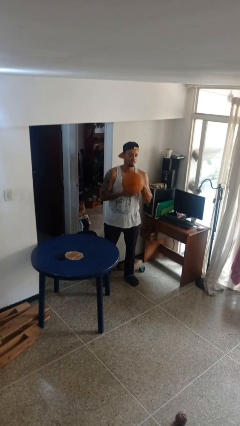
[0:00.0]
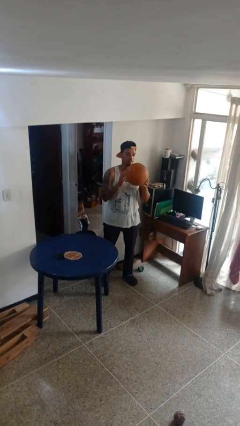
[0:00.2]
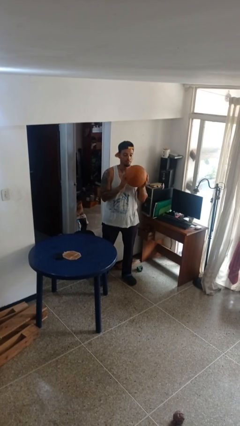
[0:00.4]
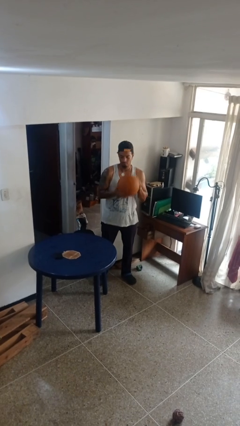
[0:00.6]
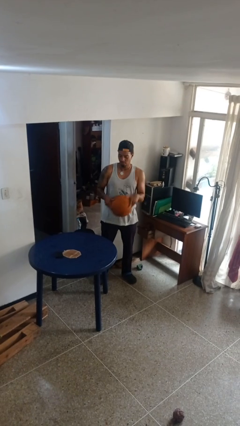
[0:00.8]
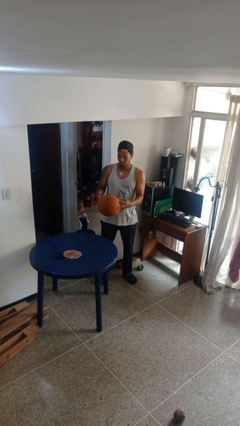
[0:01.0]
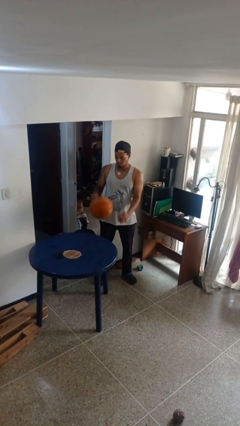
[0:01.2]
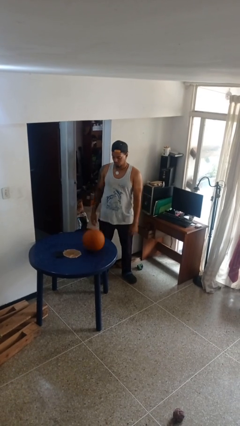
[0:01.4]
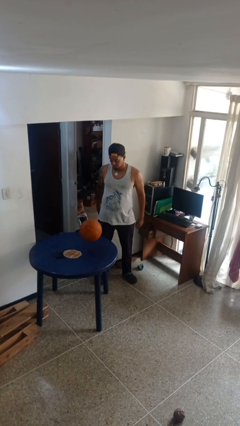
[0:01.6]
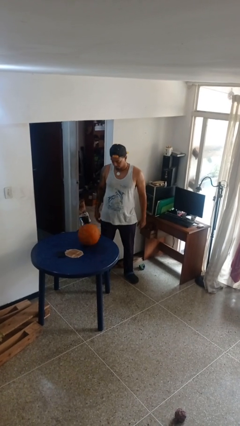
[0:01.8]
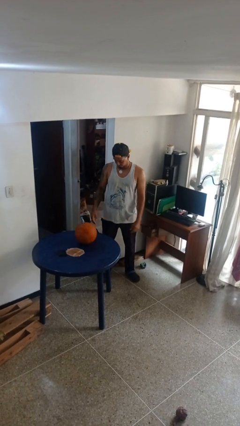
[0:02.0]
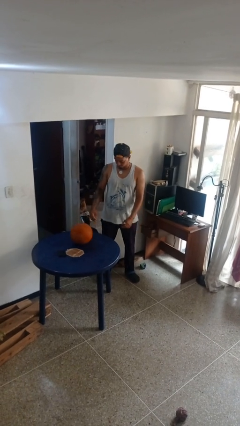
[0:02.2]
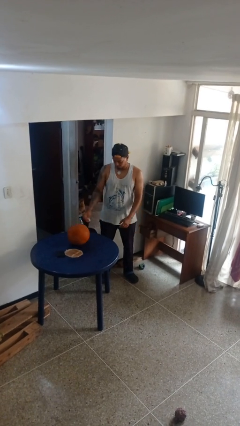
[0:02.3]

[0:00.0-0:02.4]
person throws object on table

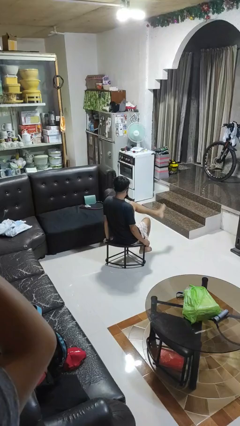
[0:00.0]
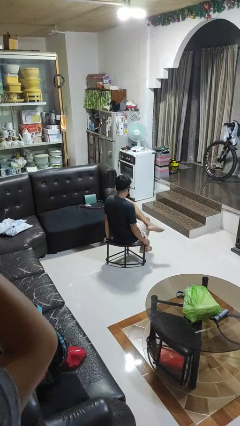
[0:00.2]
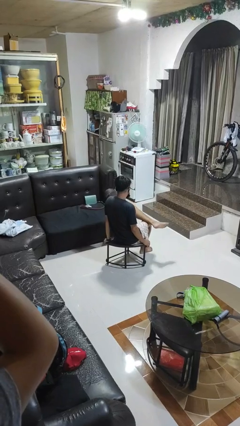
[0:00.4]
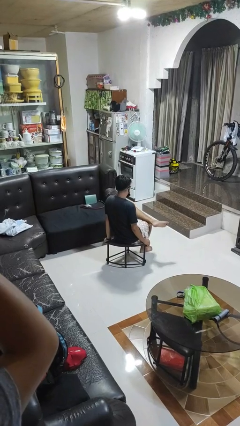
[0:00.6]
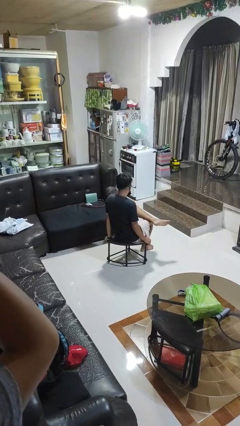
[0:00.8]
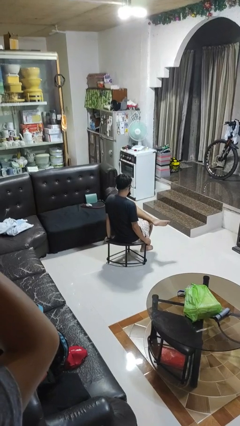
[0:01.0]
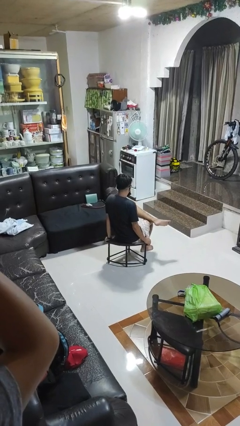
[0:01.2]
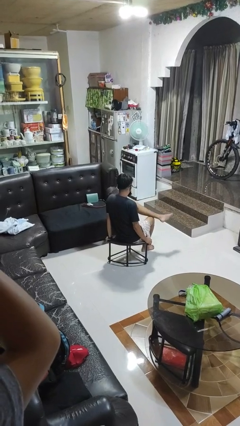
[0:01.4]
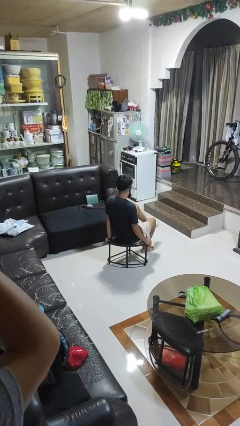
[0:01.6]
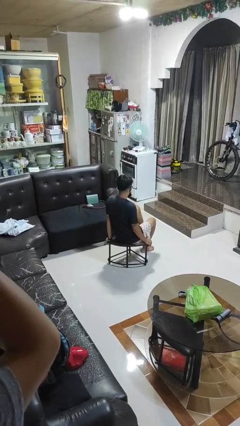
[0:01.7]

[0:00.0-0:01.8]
person crosses legs

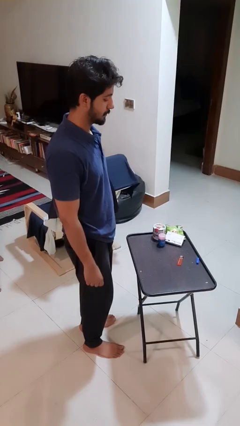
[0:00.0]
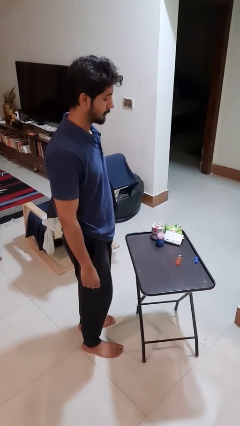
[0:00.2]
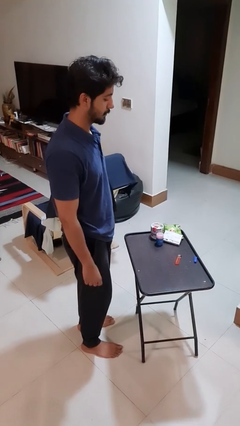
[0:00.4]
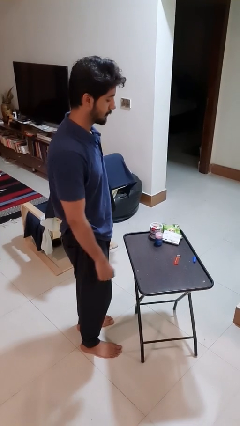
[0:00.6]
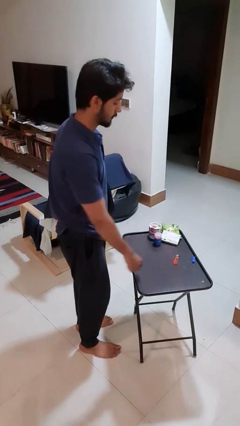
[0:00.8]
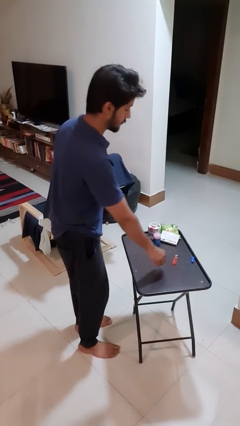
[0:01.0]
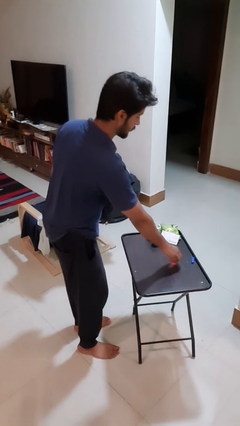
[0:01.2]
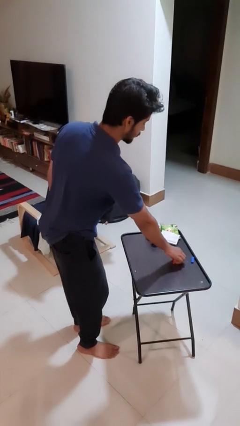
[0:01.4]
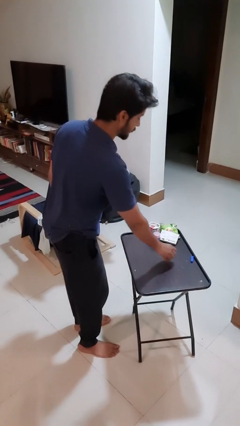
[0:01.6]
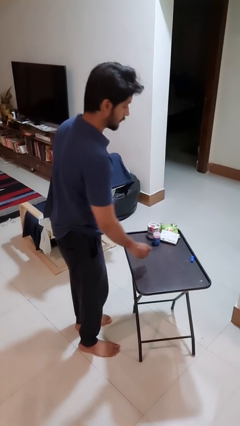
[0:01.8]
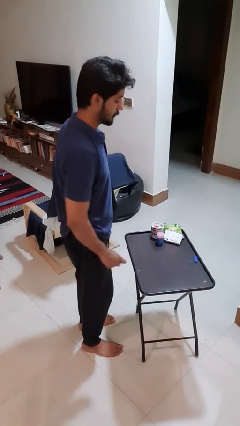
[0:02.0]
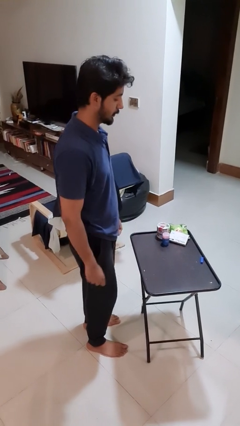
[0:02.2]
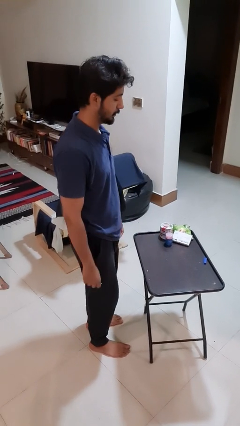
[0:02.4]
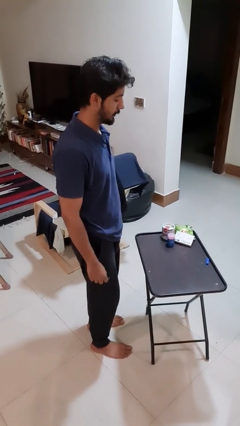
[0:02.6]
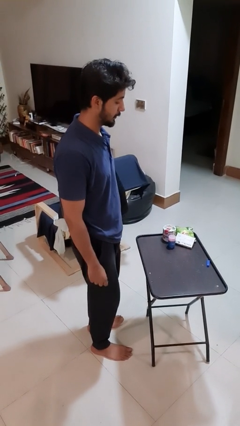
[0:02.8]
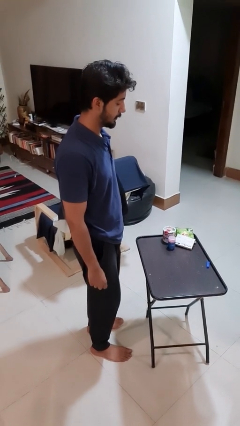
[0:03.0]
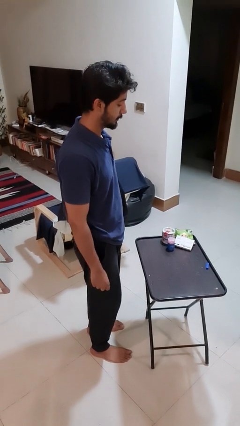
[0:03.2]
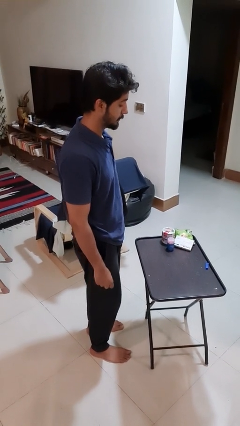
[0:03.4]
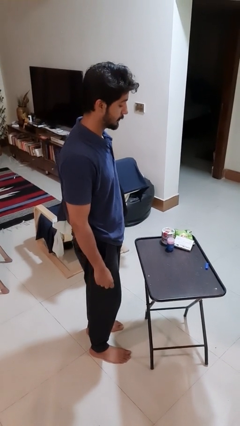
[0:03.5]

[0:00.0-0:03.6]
person picks up object from table

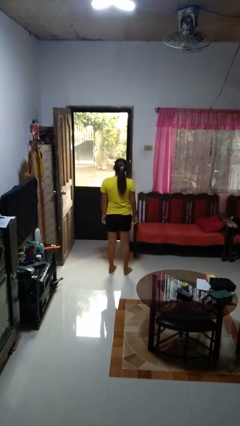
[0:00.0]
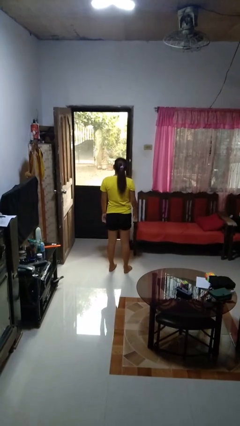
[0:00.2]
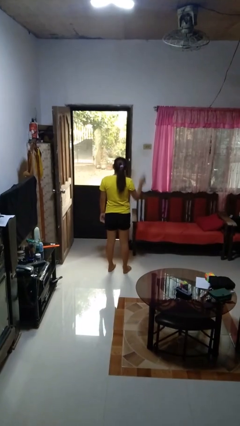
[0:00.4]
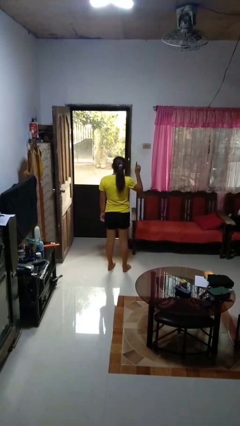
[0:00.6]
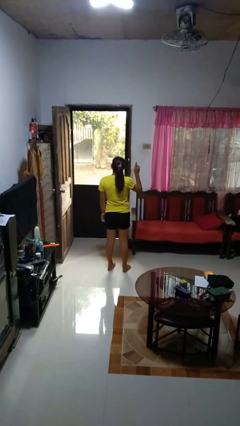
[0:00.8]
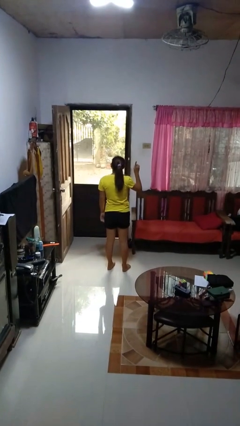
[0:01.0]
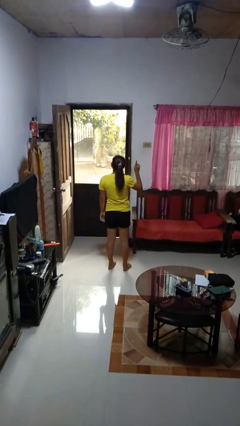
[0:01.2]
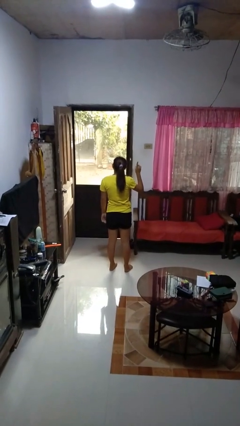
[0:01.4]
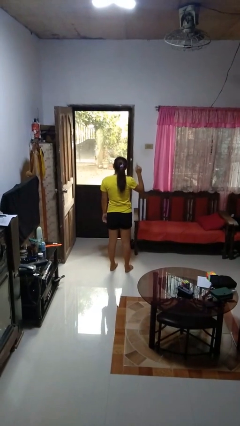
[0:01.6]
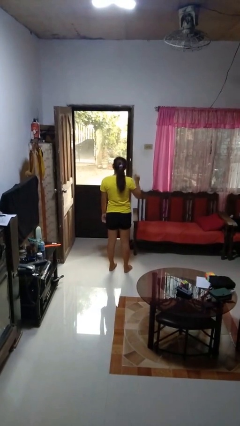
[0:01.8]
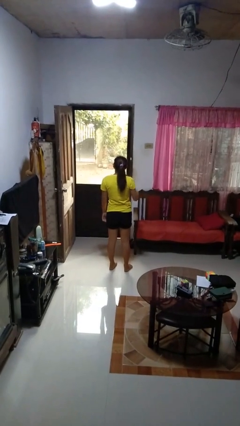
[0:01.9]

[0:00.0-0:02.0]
person gestures number one

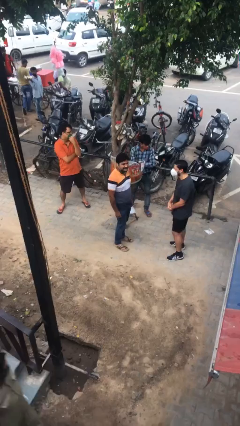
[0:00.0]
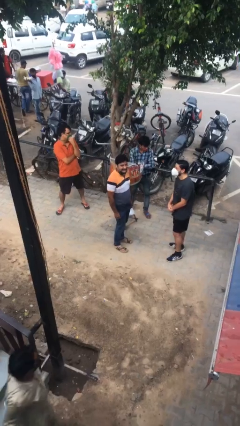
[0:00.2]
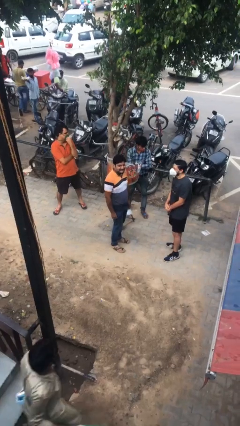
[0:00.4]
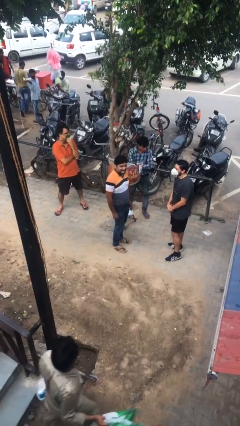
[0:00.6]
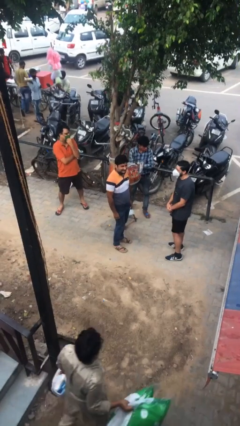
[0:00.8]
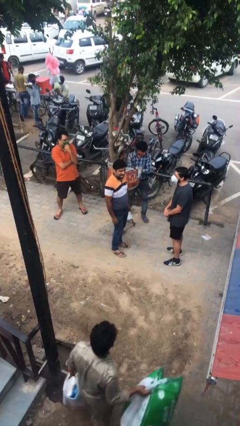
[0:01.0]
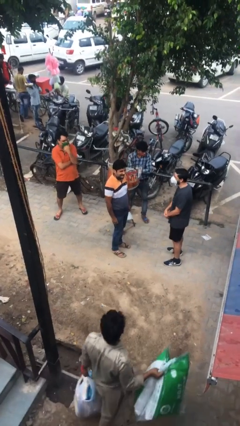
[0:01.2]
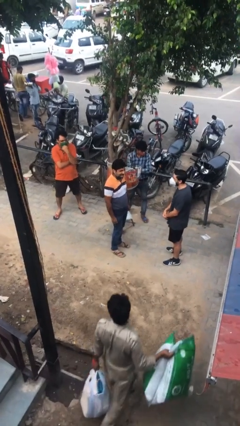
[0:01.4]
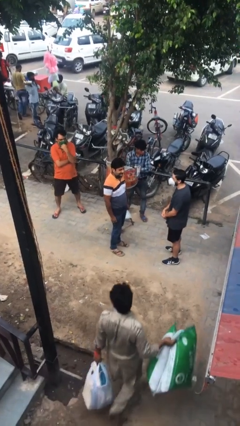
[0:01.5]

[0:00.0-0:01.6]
person laughs with person

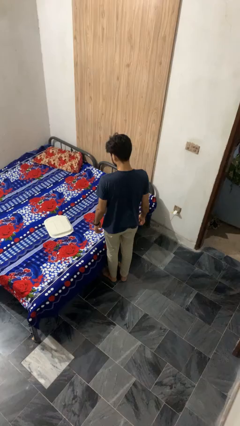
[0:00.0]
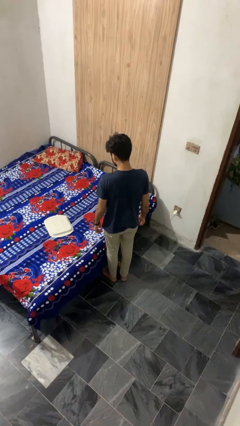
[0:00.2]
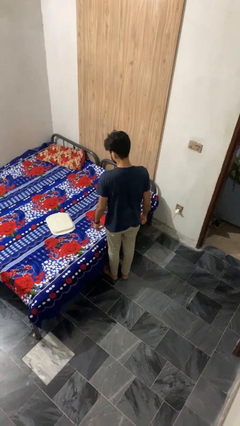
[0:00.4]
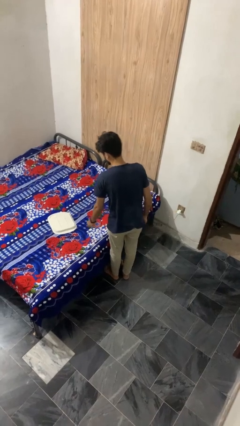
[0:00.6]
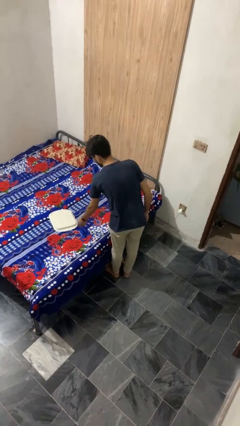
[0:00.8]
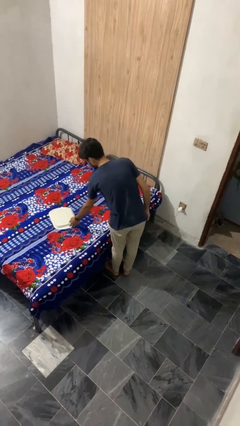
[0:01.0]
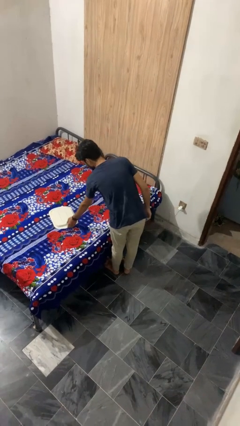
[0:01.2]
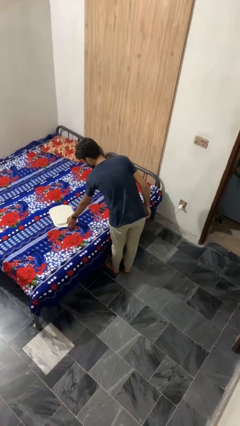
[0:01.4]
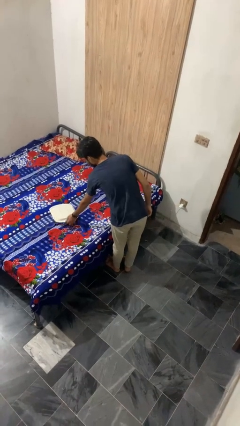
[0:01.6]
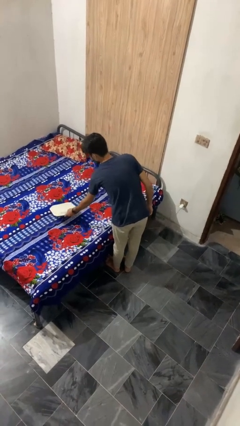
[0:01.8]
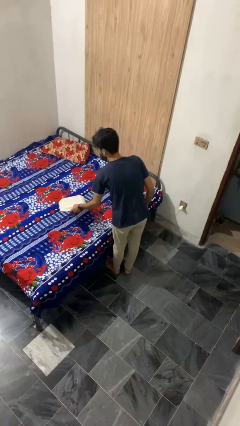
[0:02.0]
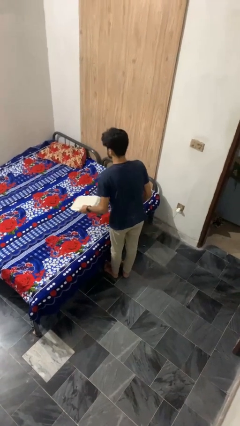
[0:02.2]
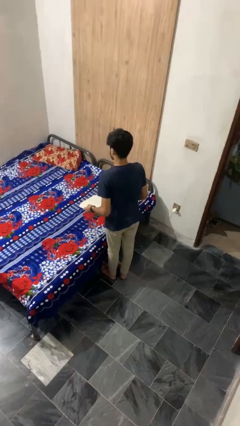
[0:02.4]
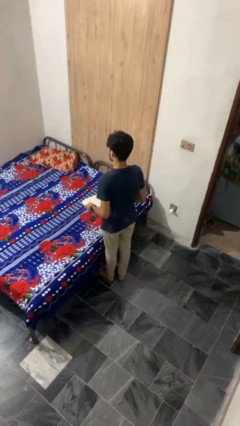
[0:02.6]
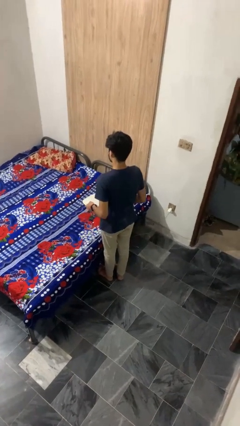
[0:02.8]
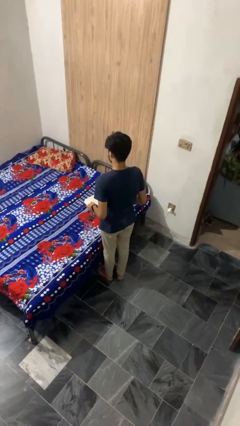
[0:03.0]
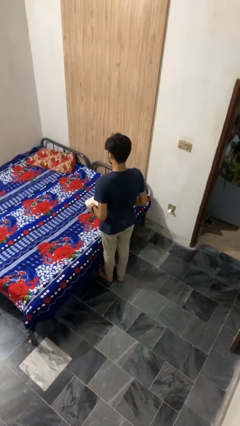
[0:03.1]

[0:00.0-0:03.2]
person picks up object from bed

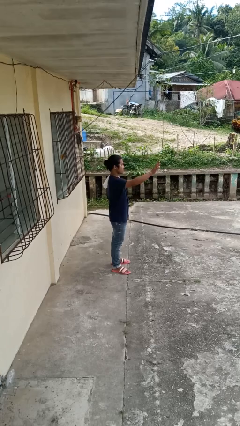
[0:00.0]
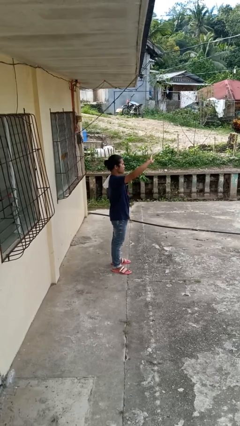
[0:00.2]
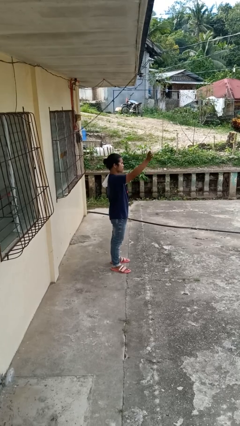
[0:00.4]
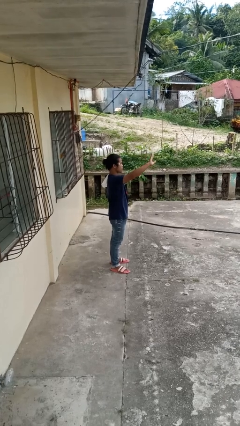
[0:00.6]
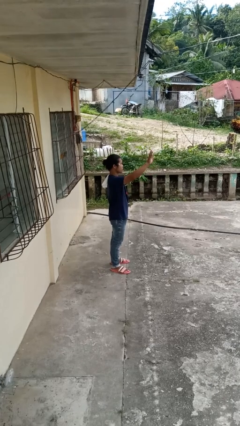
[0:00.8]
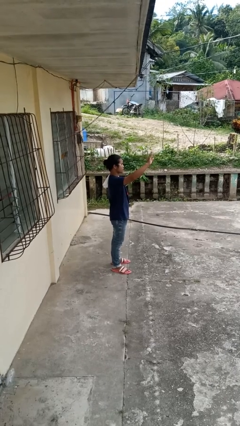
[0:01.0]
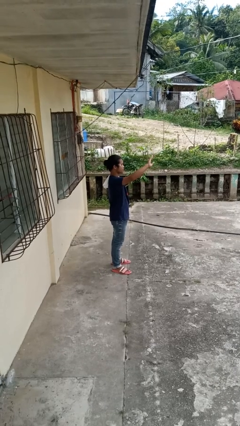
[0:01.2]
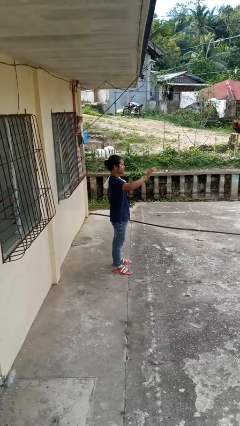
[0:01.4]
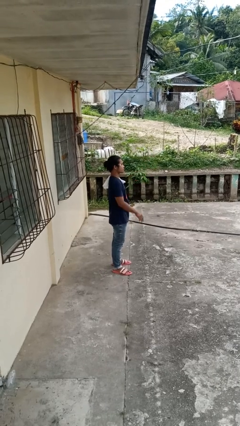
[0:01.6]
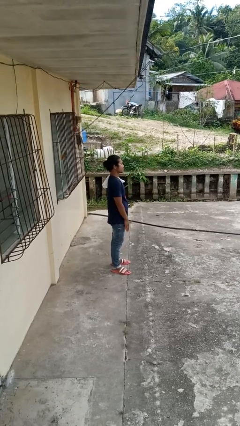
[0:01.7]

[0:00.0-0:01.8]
person waves at person

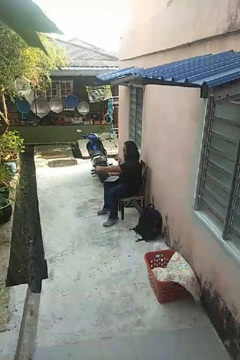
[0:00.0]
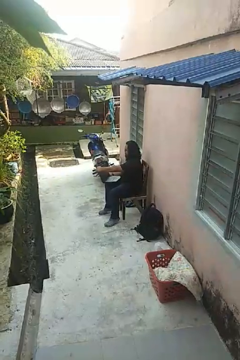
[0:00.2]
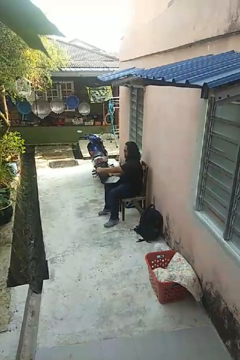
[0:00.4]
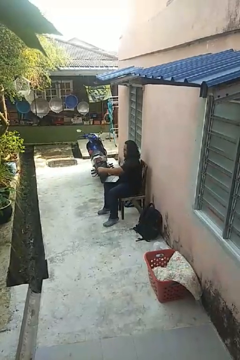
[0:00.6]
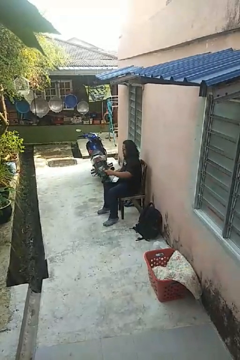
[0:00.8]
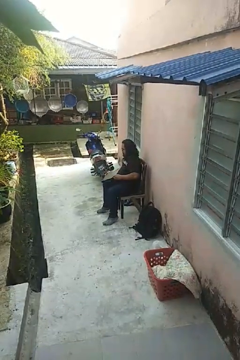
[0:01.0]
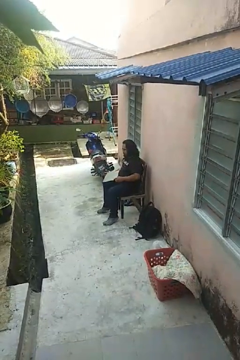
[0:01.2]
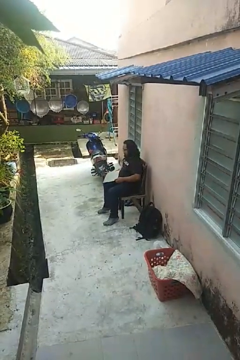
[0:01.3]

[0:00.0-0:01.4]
person closes laptop
